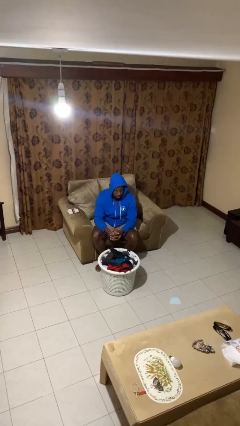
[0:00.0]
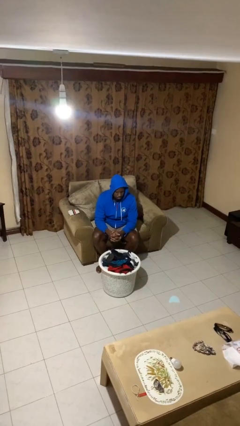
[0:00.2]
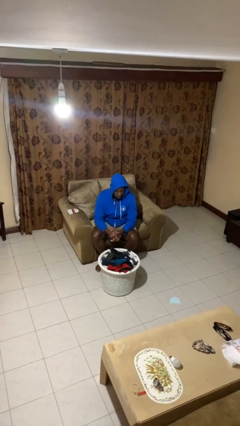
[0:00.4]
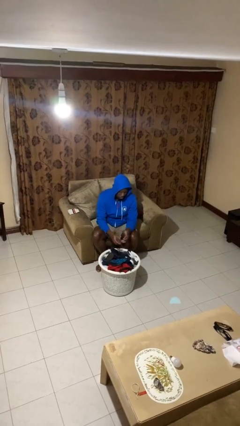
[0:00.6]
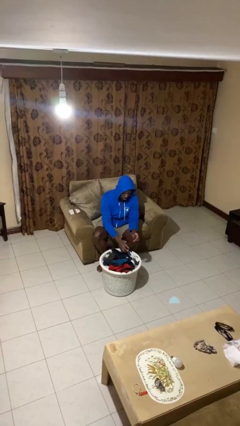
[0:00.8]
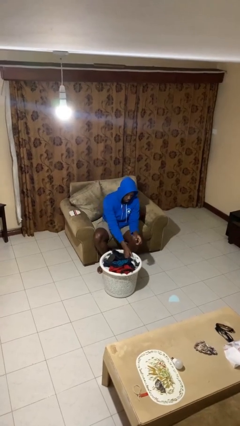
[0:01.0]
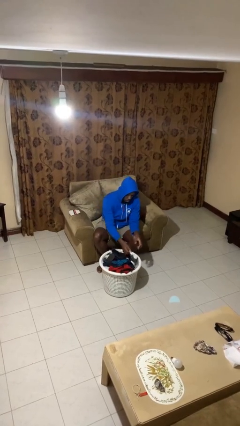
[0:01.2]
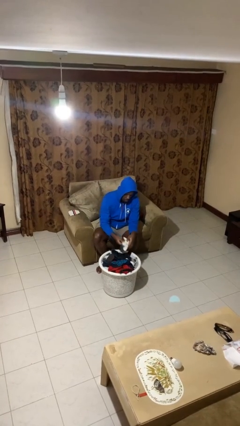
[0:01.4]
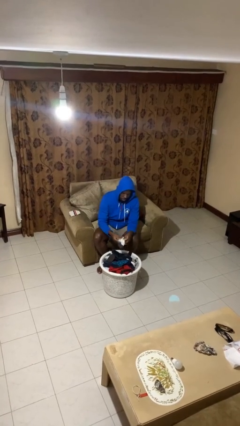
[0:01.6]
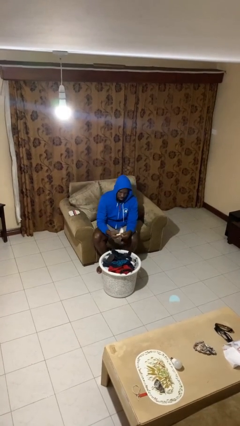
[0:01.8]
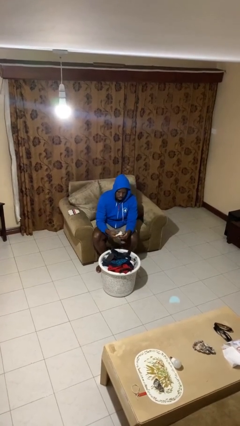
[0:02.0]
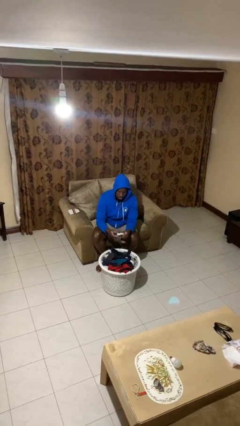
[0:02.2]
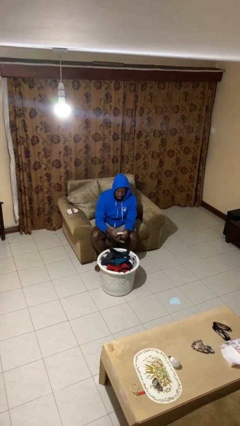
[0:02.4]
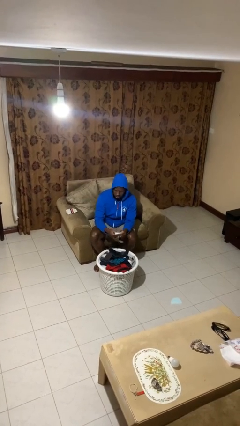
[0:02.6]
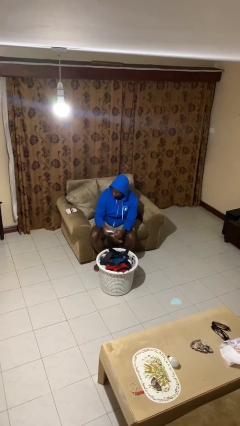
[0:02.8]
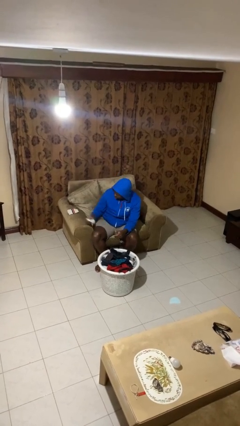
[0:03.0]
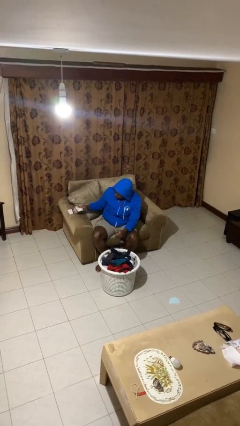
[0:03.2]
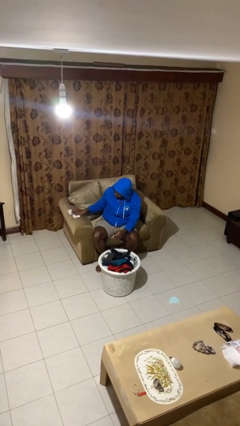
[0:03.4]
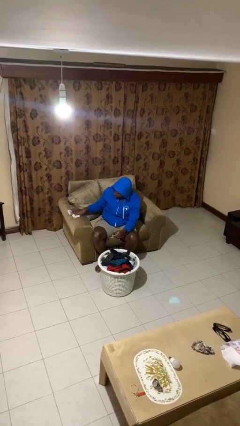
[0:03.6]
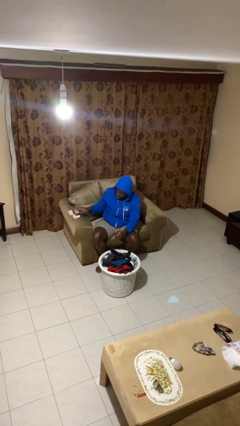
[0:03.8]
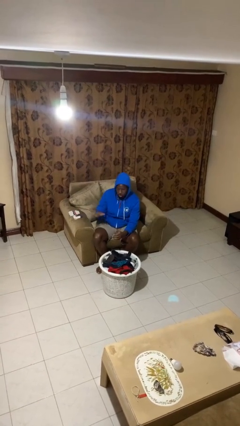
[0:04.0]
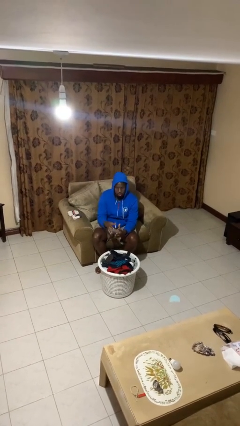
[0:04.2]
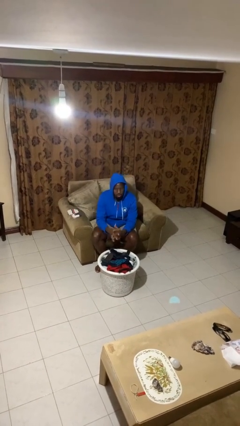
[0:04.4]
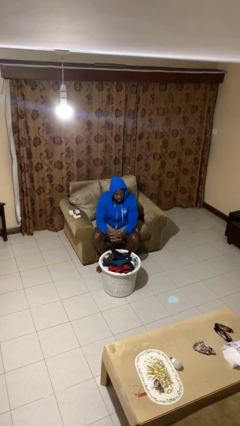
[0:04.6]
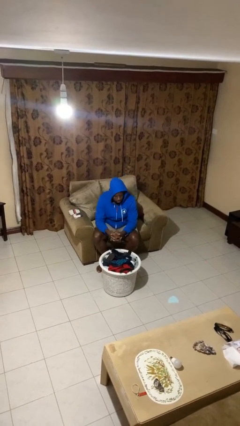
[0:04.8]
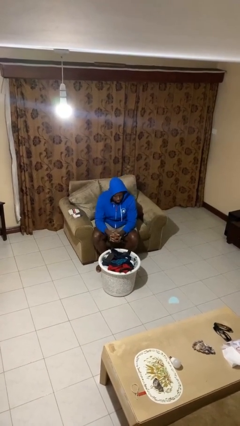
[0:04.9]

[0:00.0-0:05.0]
person folds socks

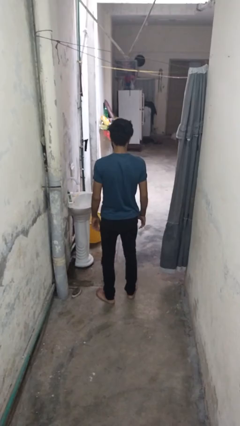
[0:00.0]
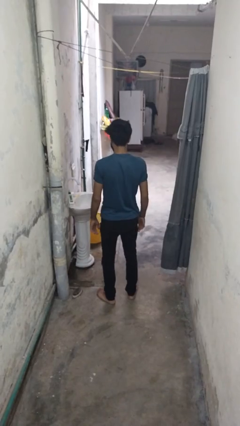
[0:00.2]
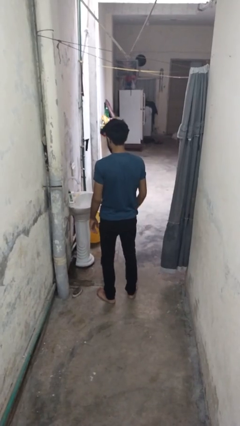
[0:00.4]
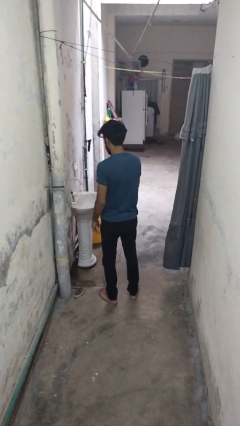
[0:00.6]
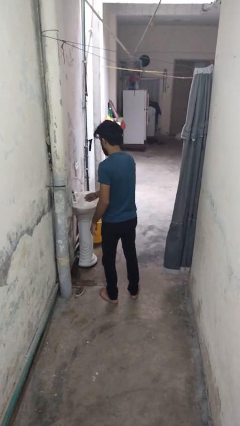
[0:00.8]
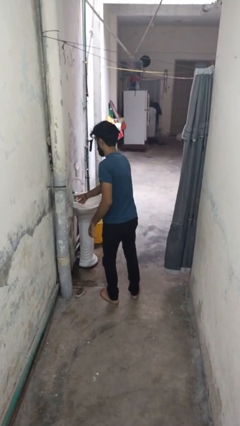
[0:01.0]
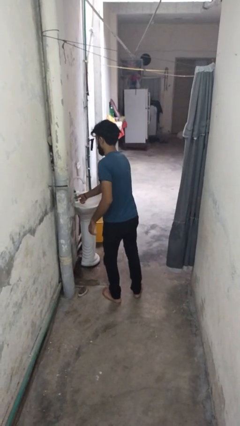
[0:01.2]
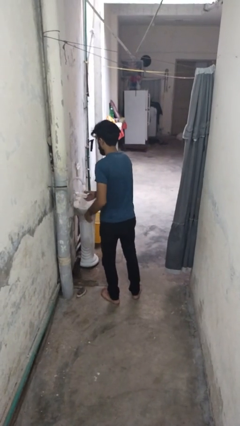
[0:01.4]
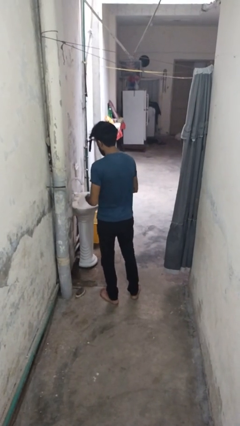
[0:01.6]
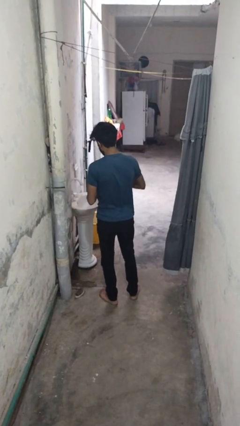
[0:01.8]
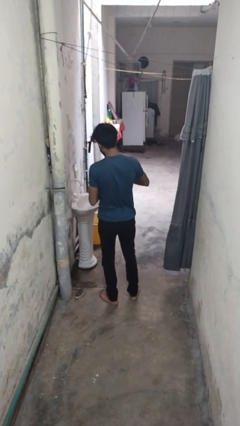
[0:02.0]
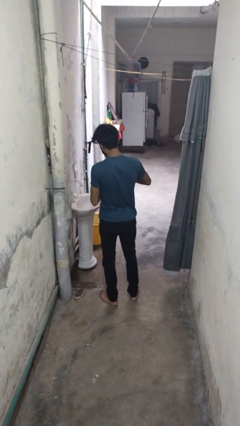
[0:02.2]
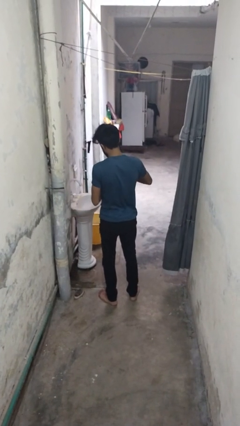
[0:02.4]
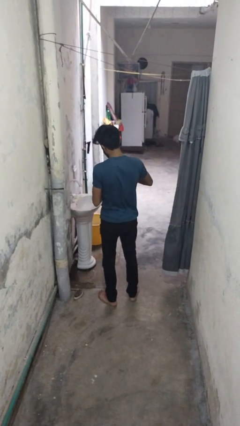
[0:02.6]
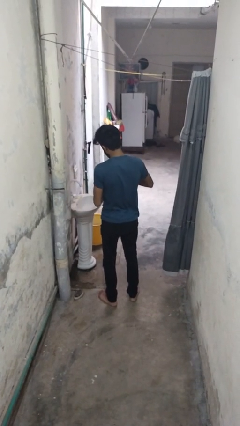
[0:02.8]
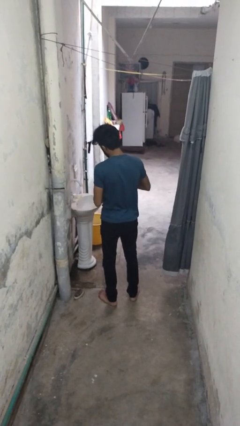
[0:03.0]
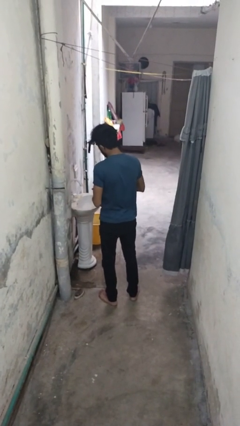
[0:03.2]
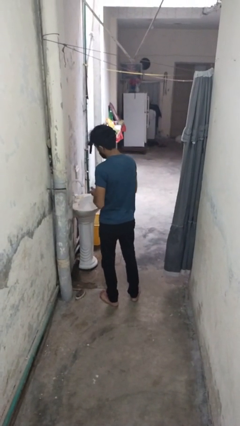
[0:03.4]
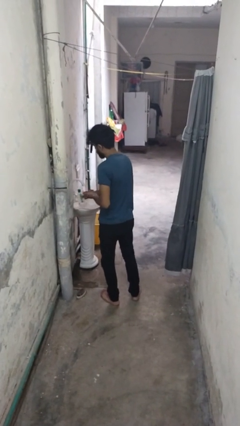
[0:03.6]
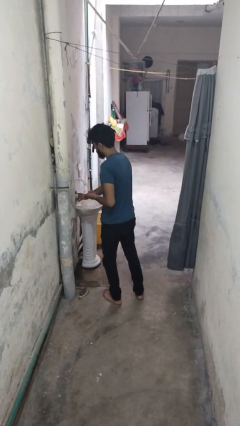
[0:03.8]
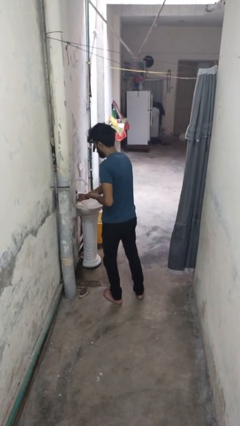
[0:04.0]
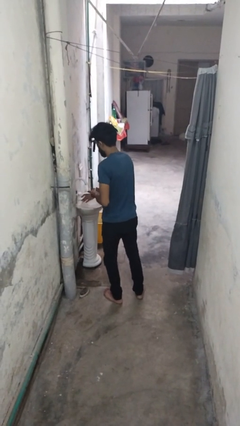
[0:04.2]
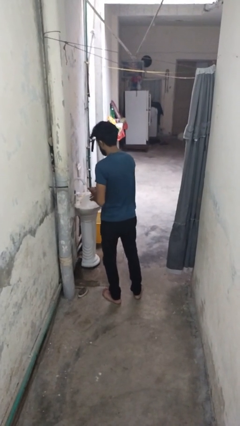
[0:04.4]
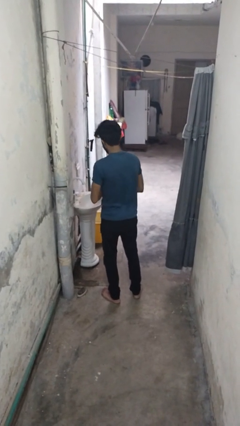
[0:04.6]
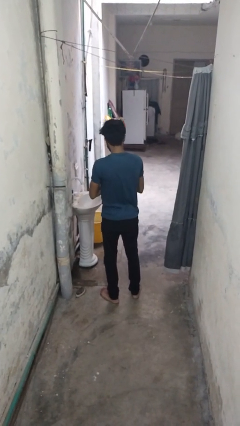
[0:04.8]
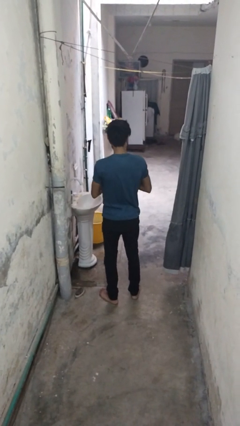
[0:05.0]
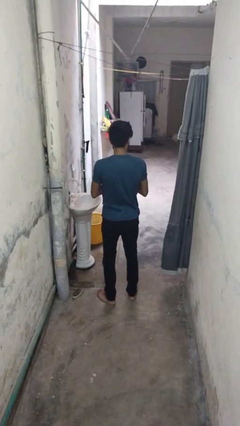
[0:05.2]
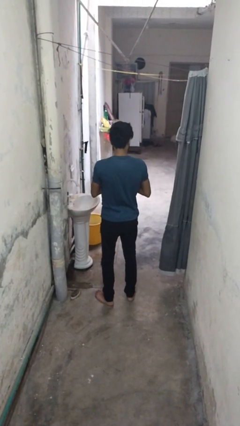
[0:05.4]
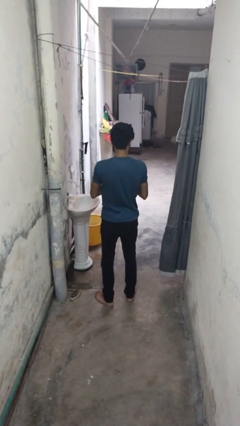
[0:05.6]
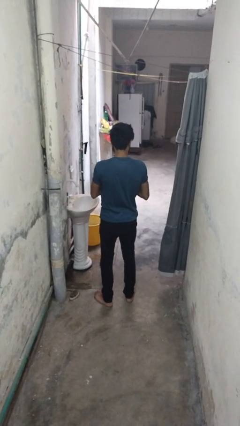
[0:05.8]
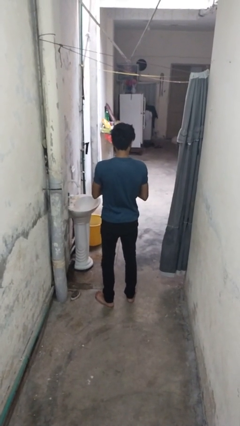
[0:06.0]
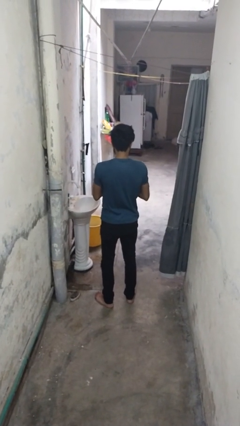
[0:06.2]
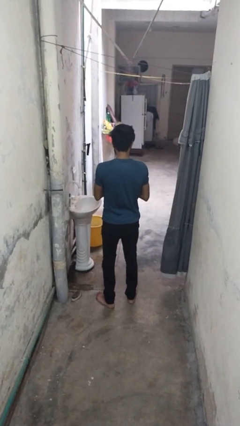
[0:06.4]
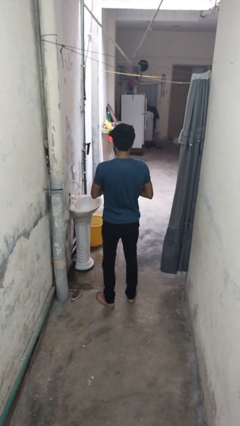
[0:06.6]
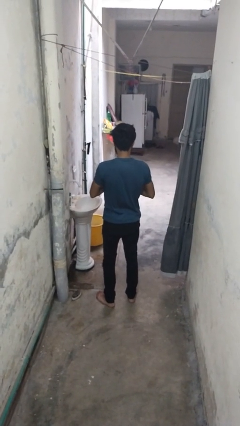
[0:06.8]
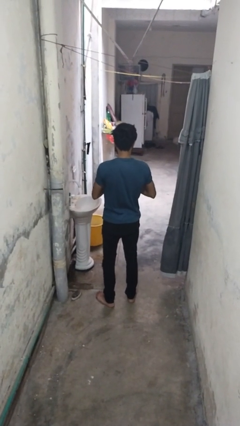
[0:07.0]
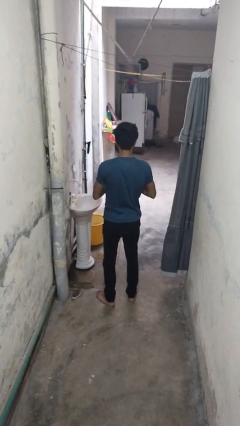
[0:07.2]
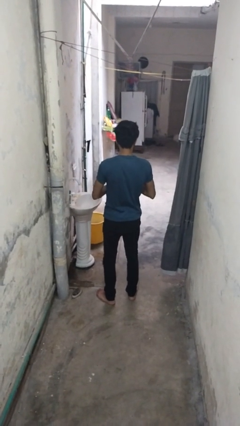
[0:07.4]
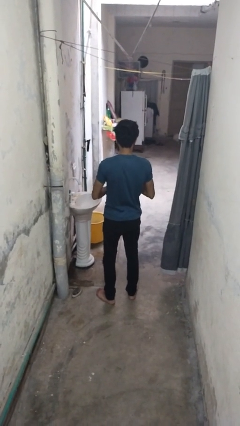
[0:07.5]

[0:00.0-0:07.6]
person applies sunscreen

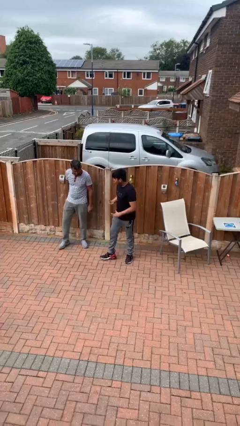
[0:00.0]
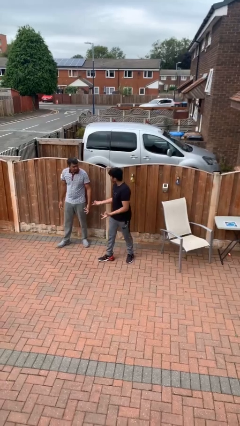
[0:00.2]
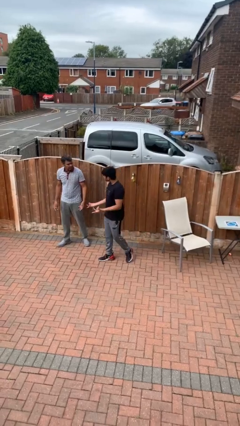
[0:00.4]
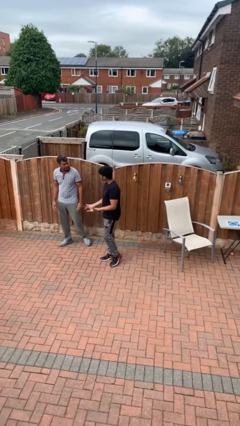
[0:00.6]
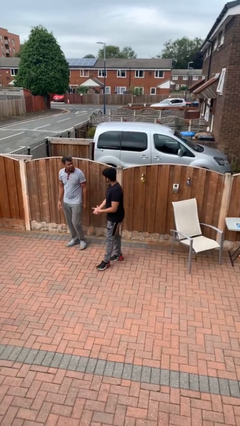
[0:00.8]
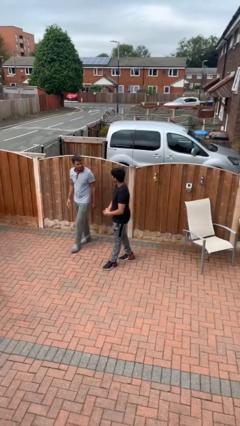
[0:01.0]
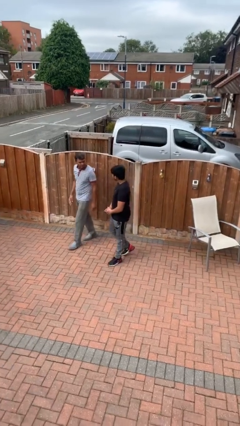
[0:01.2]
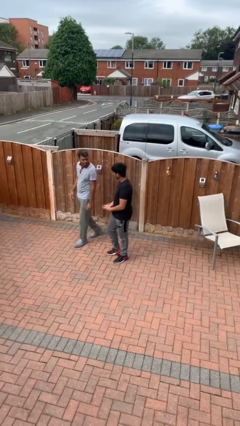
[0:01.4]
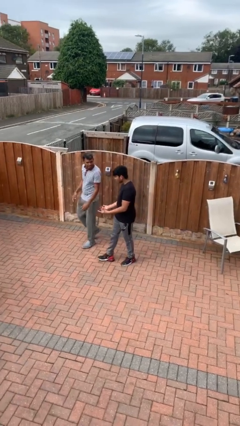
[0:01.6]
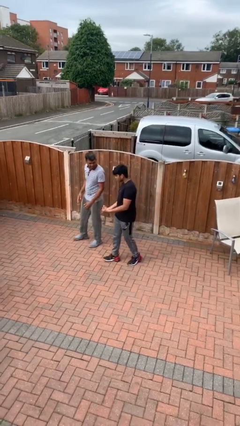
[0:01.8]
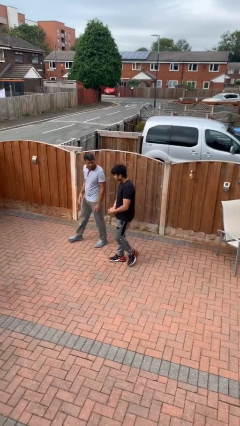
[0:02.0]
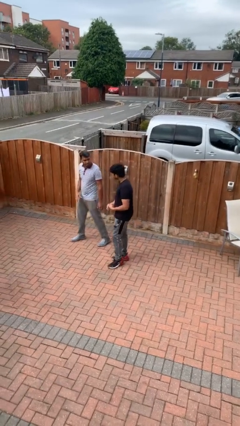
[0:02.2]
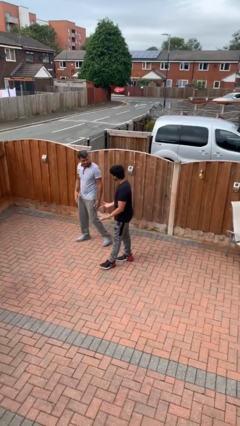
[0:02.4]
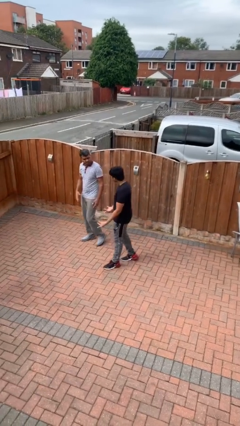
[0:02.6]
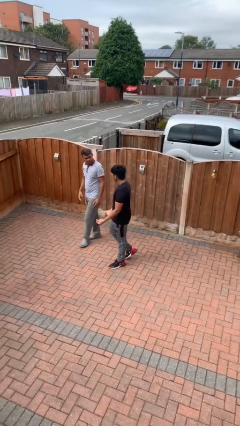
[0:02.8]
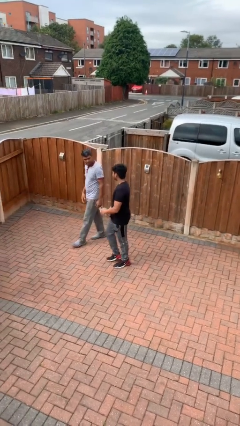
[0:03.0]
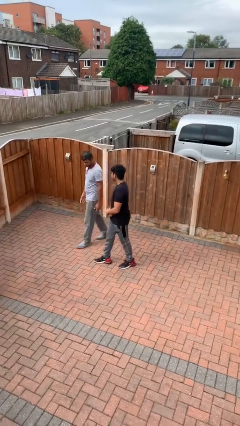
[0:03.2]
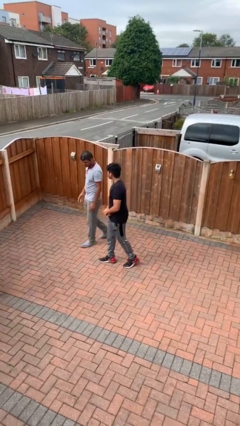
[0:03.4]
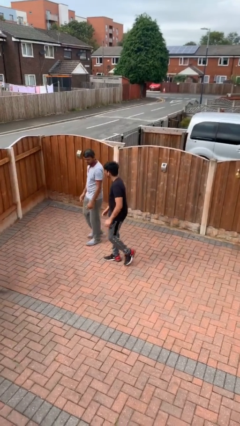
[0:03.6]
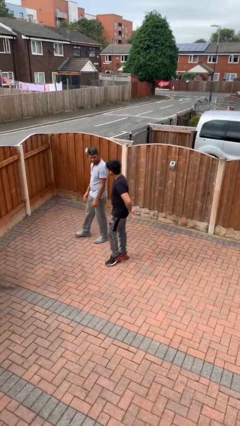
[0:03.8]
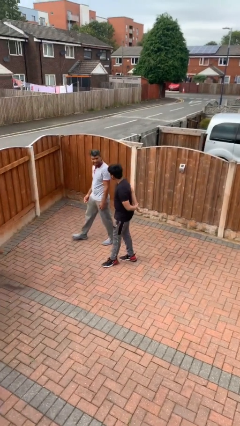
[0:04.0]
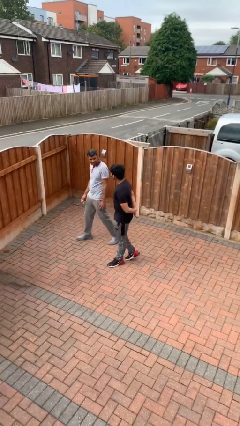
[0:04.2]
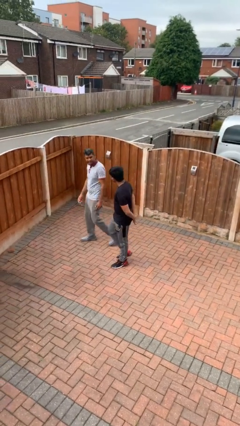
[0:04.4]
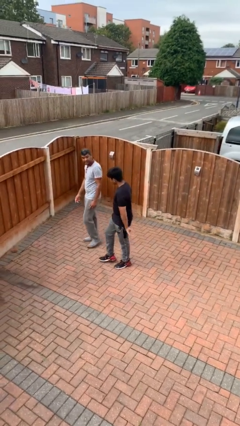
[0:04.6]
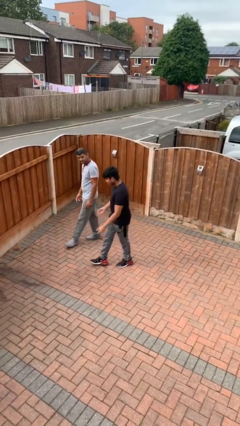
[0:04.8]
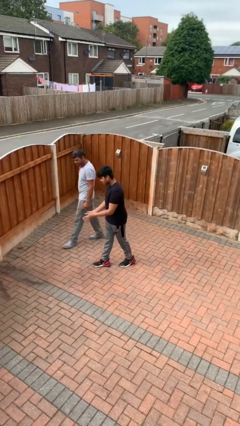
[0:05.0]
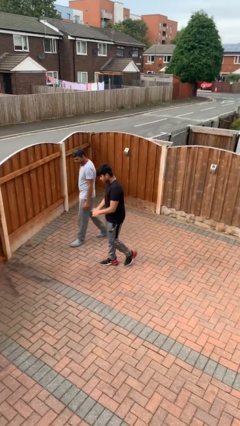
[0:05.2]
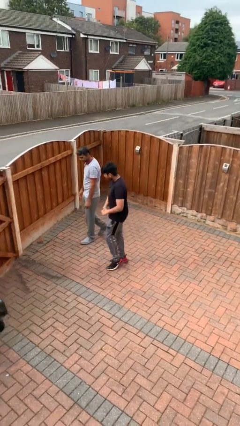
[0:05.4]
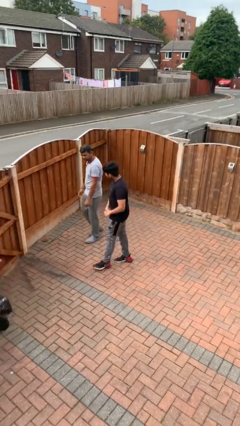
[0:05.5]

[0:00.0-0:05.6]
person talks to person
